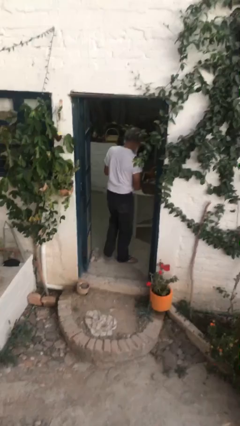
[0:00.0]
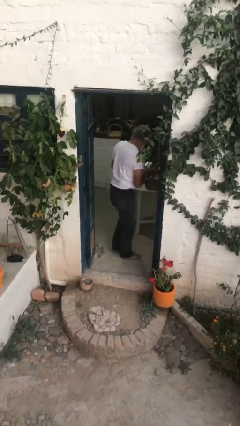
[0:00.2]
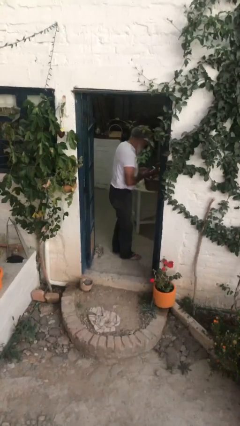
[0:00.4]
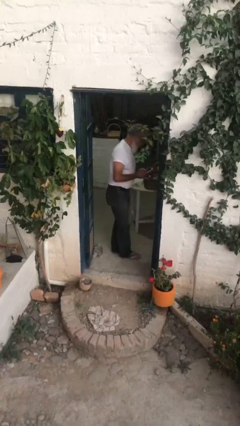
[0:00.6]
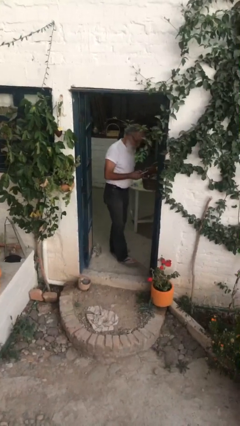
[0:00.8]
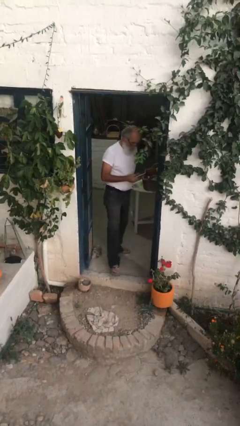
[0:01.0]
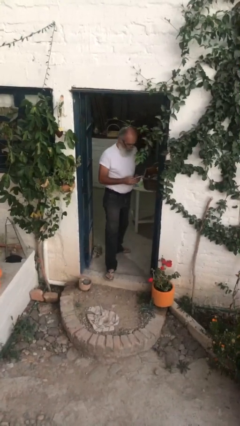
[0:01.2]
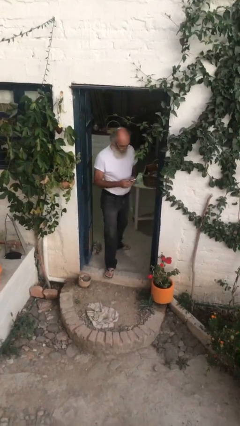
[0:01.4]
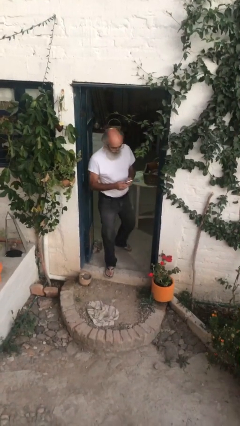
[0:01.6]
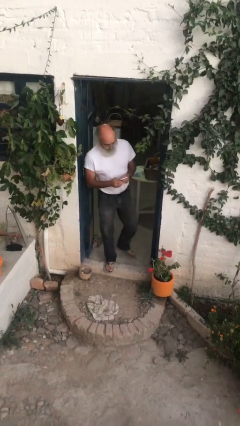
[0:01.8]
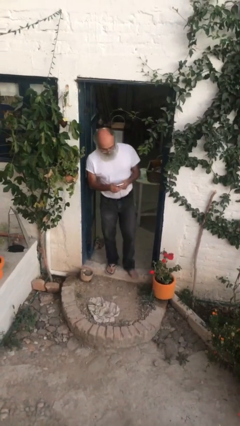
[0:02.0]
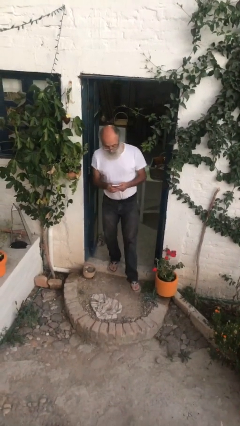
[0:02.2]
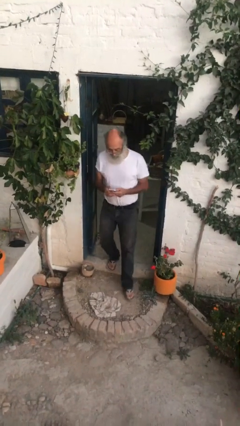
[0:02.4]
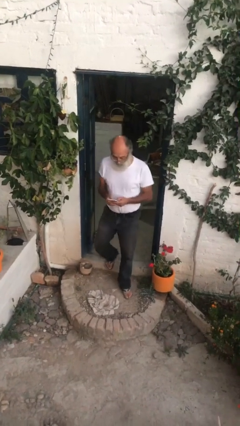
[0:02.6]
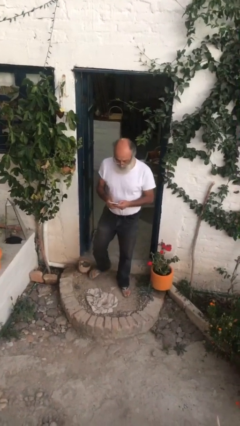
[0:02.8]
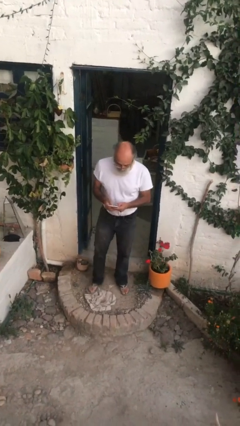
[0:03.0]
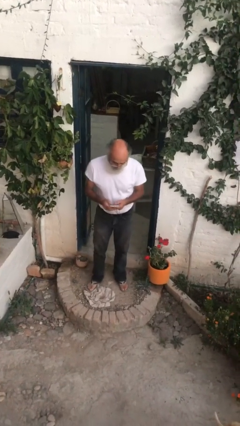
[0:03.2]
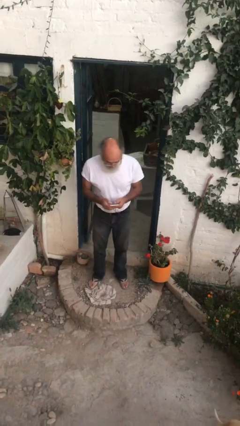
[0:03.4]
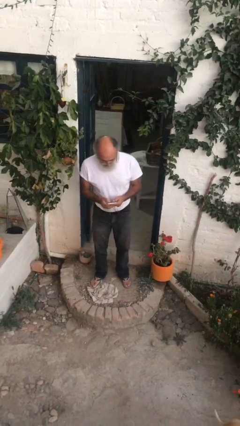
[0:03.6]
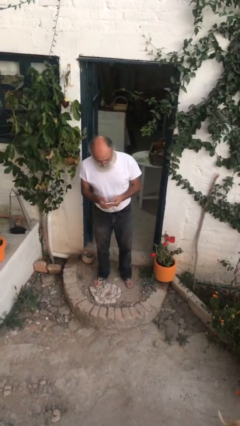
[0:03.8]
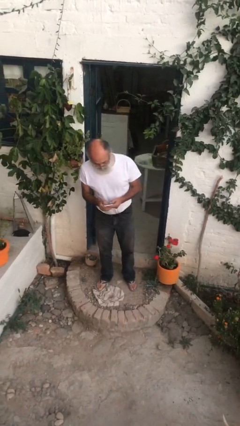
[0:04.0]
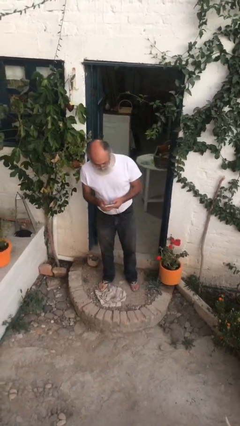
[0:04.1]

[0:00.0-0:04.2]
person enters scene through structure

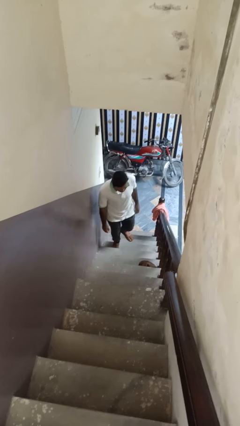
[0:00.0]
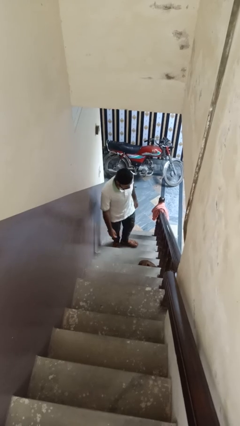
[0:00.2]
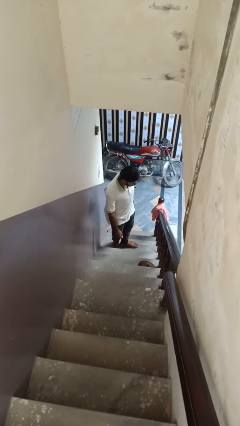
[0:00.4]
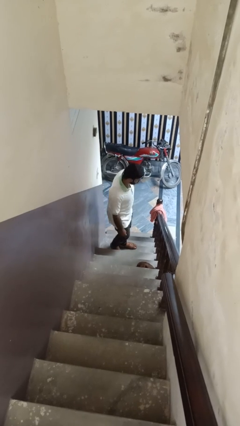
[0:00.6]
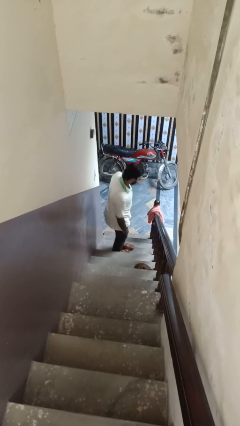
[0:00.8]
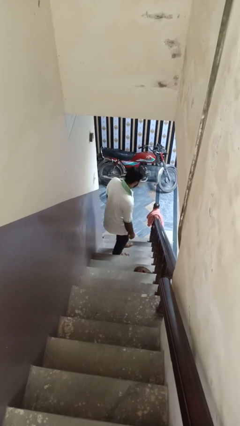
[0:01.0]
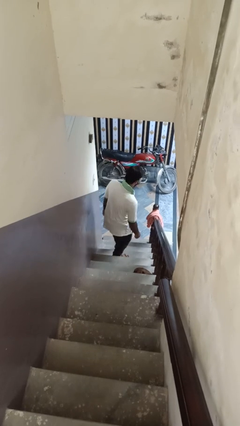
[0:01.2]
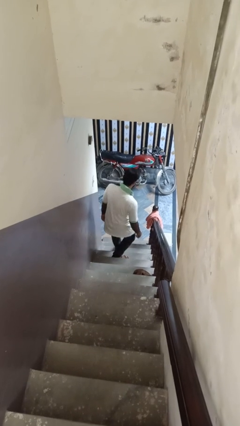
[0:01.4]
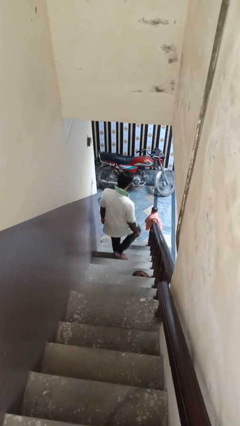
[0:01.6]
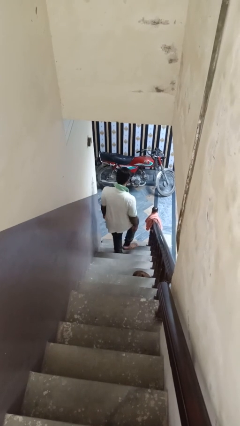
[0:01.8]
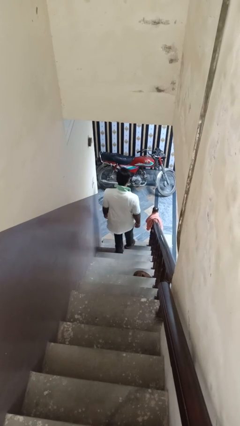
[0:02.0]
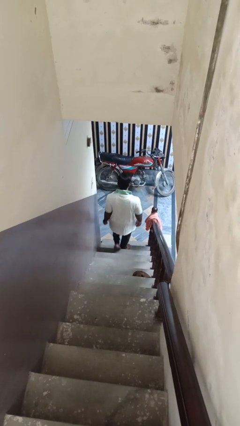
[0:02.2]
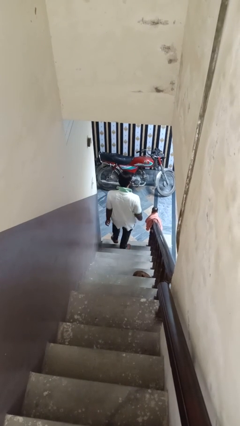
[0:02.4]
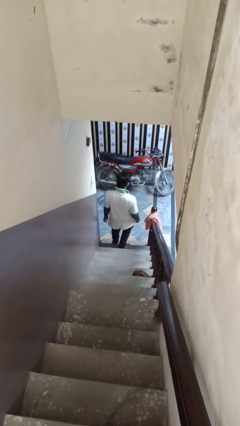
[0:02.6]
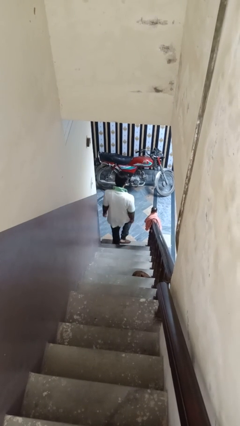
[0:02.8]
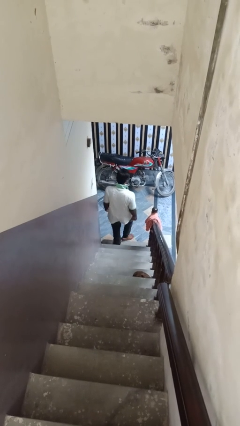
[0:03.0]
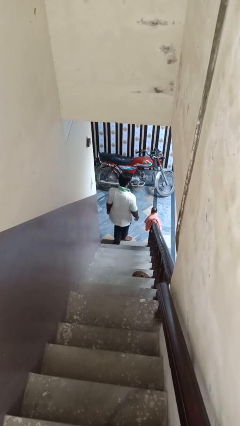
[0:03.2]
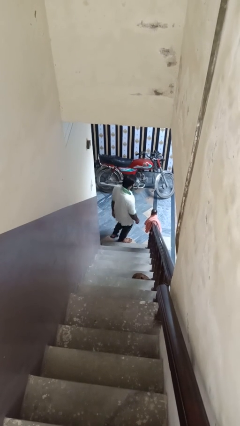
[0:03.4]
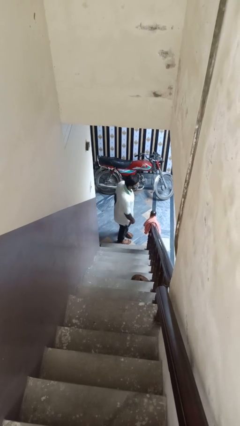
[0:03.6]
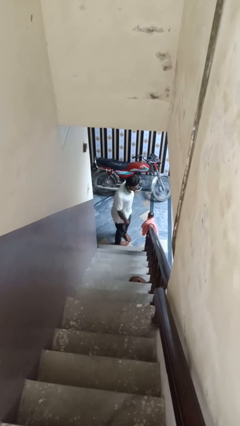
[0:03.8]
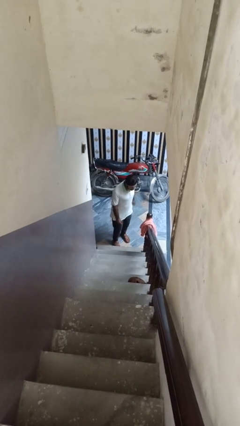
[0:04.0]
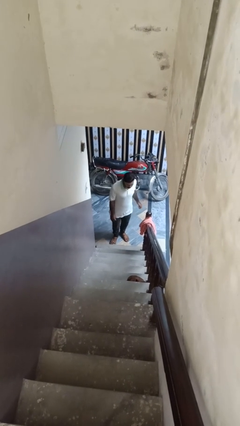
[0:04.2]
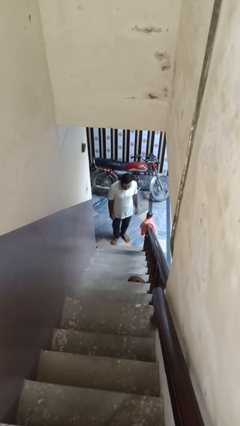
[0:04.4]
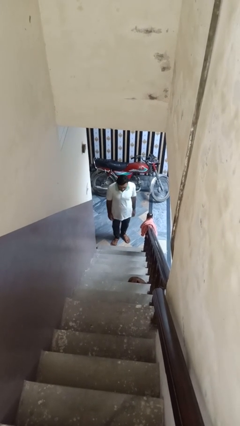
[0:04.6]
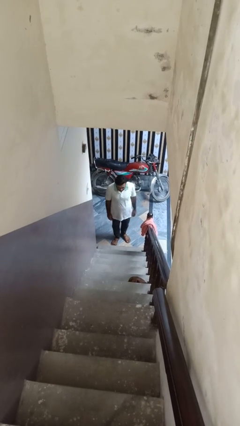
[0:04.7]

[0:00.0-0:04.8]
person climbs down ladder

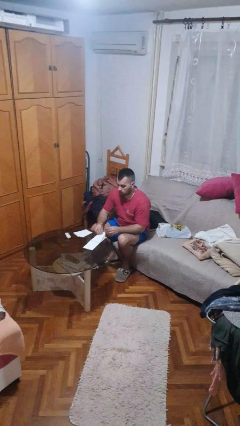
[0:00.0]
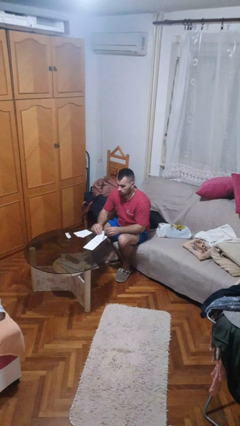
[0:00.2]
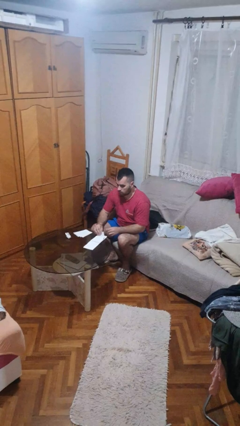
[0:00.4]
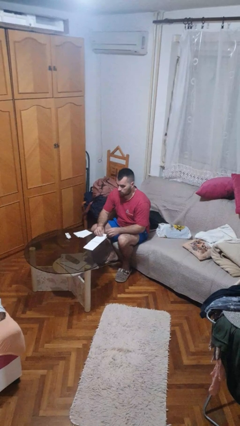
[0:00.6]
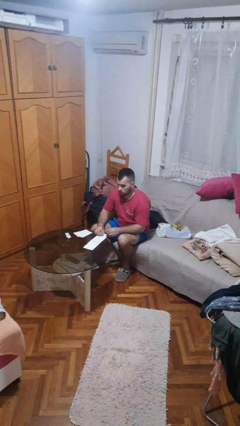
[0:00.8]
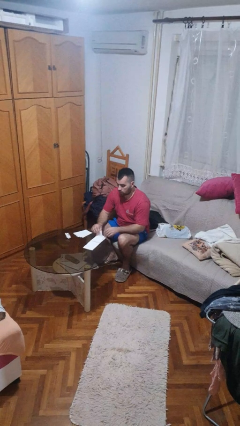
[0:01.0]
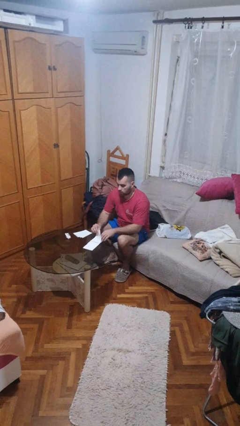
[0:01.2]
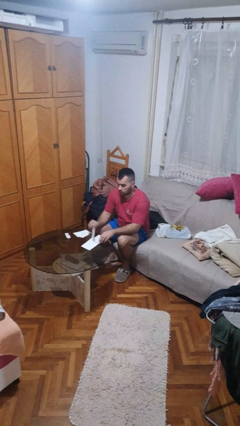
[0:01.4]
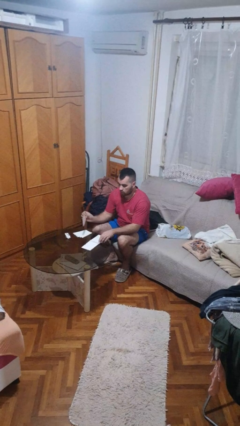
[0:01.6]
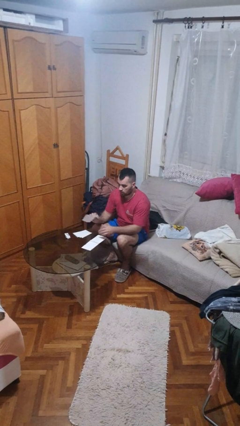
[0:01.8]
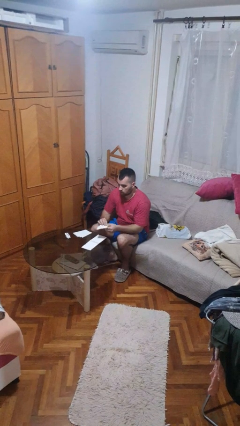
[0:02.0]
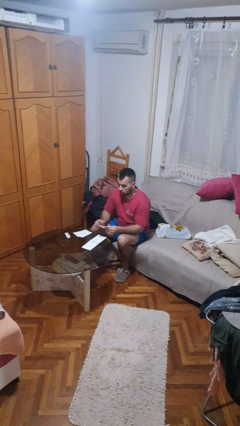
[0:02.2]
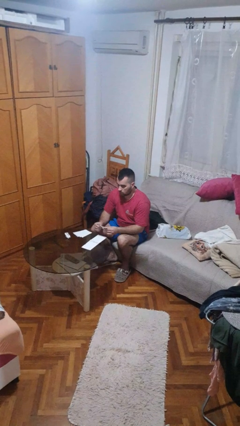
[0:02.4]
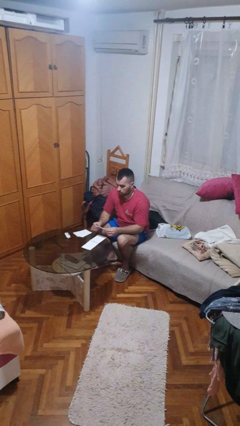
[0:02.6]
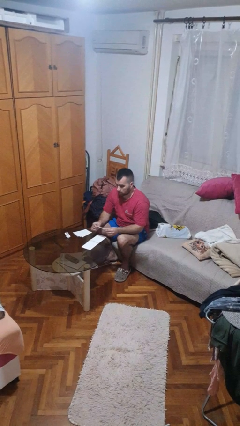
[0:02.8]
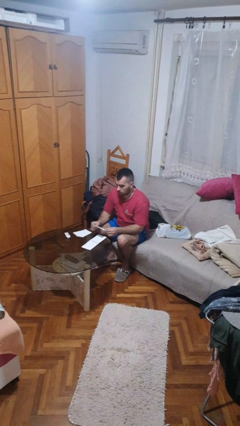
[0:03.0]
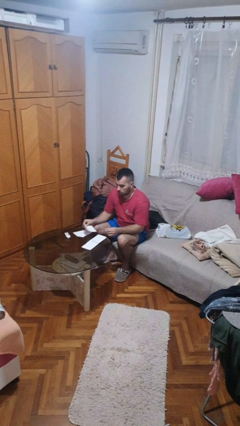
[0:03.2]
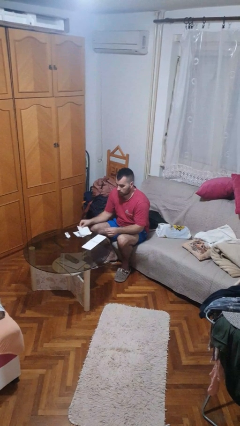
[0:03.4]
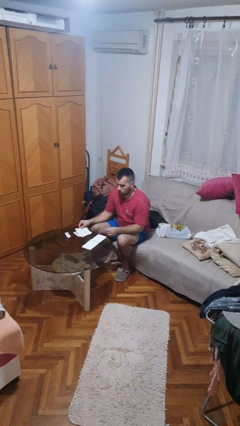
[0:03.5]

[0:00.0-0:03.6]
person tears paper

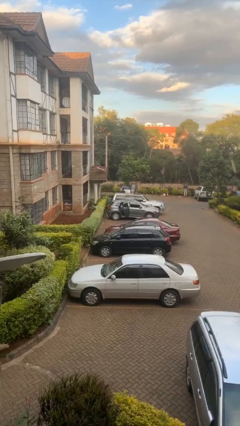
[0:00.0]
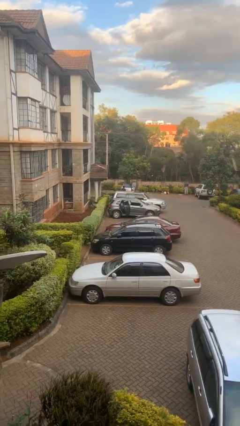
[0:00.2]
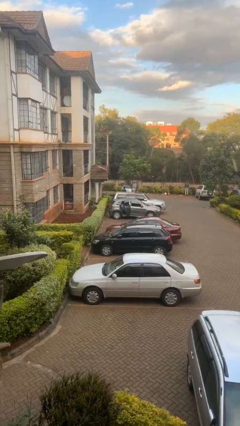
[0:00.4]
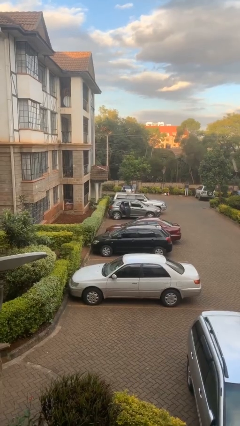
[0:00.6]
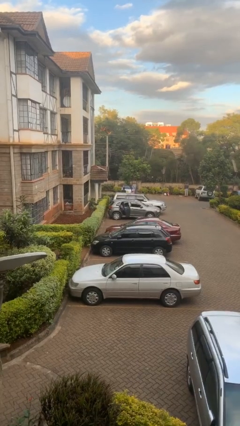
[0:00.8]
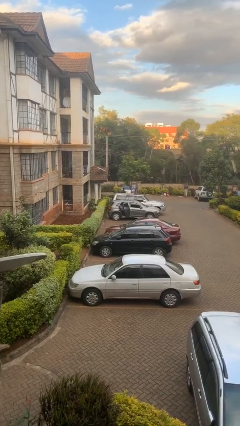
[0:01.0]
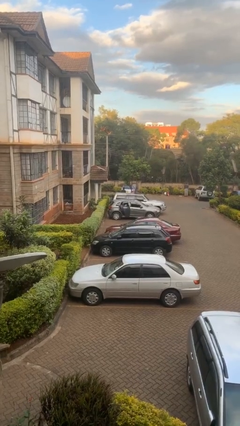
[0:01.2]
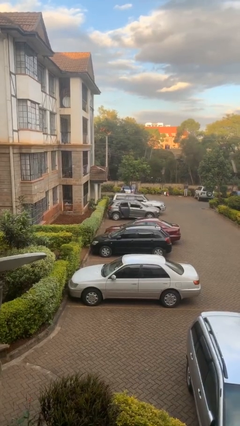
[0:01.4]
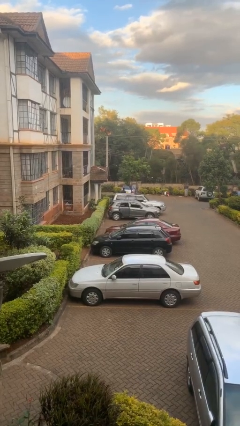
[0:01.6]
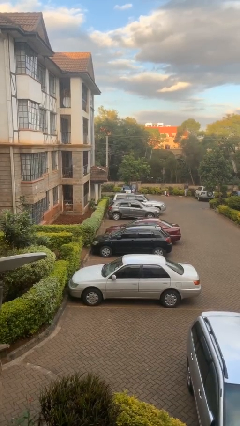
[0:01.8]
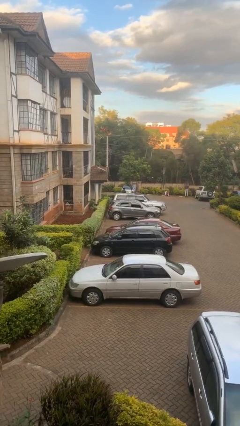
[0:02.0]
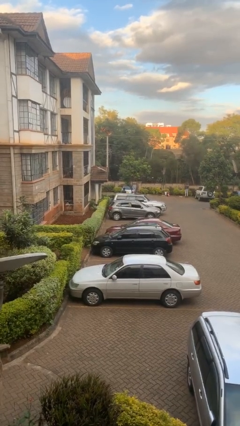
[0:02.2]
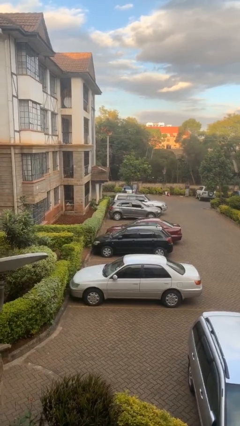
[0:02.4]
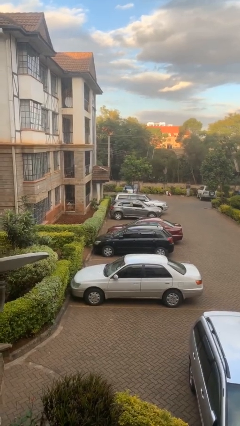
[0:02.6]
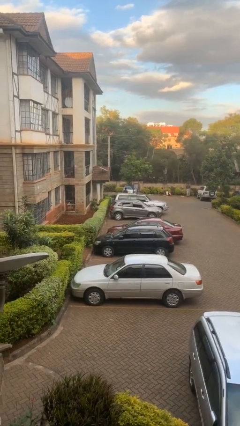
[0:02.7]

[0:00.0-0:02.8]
person closes car door

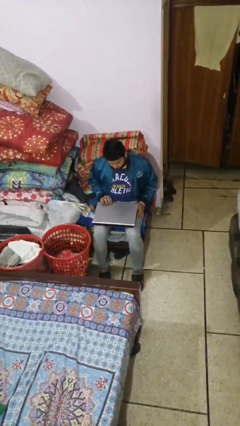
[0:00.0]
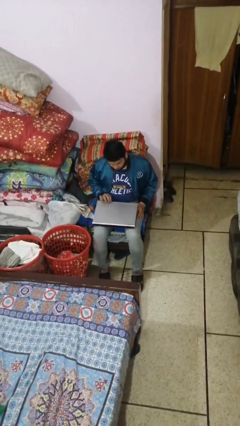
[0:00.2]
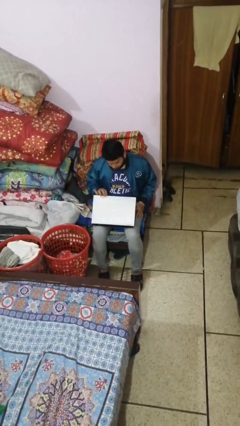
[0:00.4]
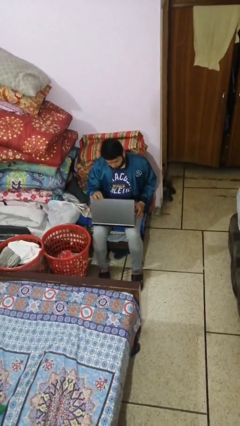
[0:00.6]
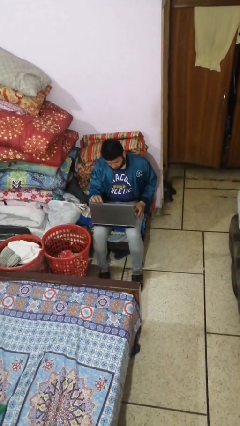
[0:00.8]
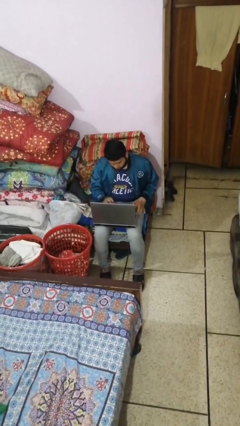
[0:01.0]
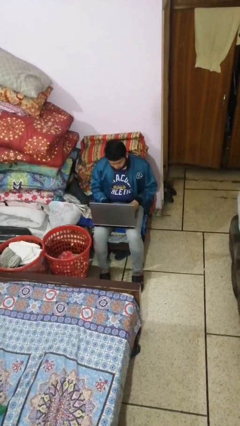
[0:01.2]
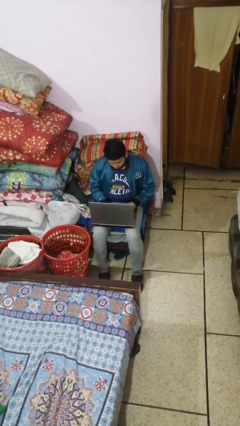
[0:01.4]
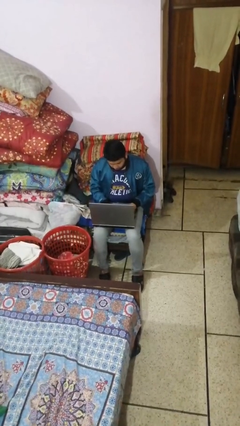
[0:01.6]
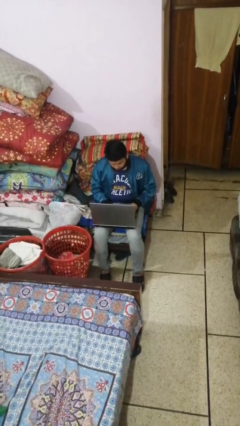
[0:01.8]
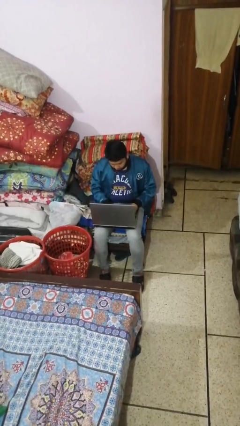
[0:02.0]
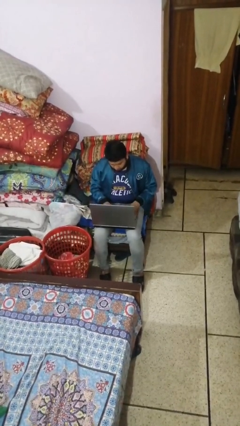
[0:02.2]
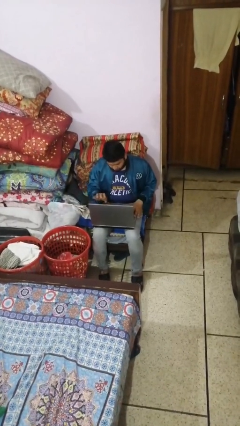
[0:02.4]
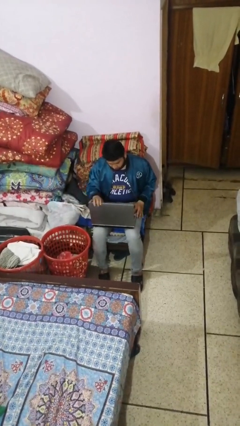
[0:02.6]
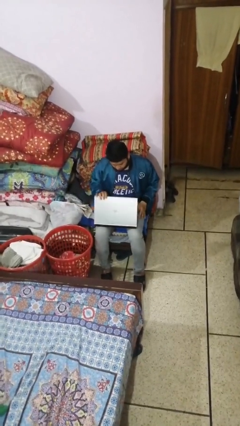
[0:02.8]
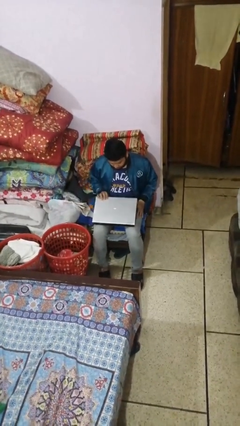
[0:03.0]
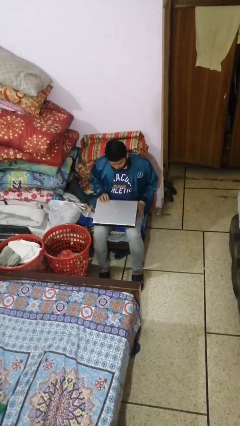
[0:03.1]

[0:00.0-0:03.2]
person interacts with laptop
